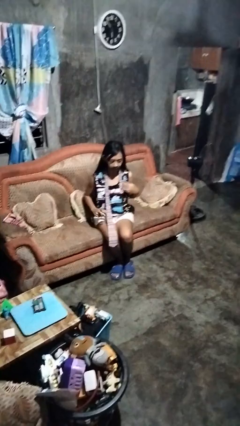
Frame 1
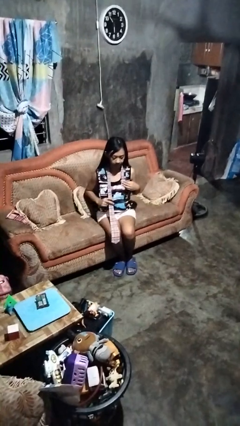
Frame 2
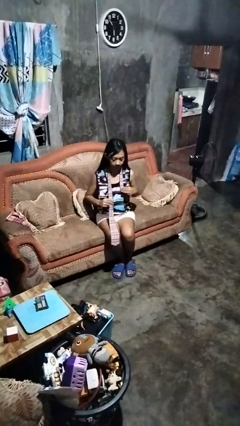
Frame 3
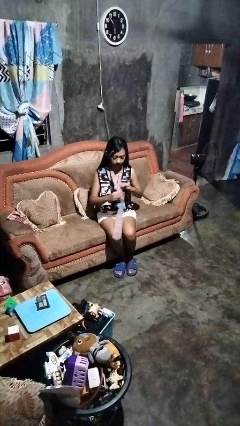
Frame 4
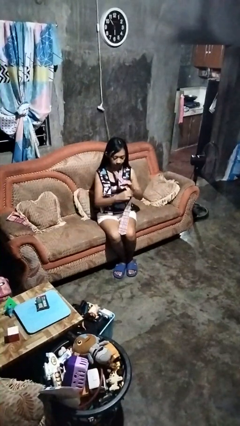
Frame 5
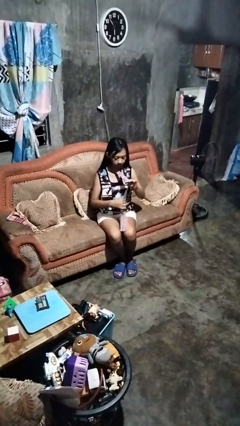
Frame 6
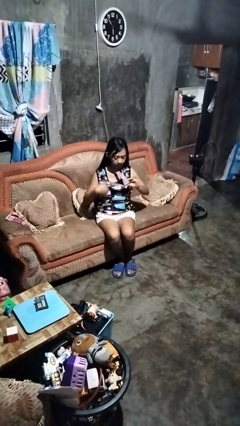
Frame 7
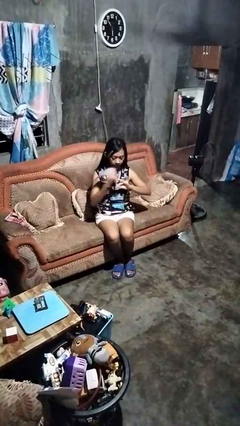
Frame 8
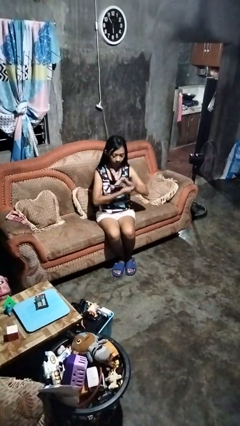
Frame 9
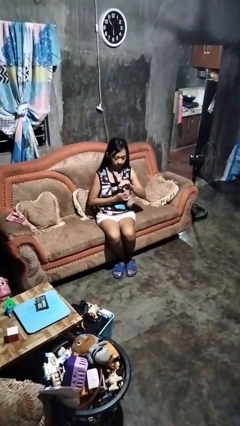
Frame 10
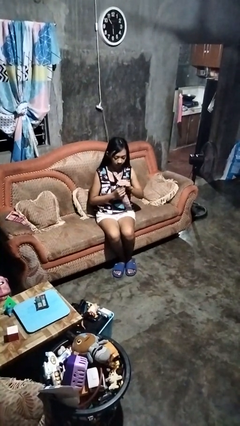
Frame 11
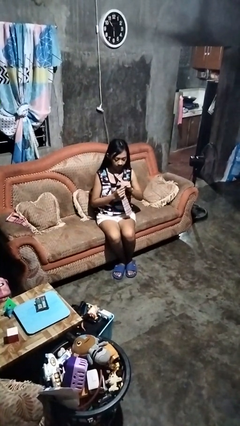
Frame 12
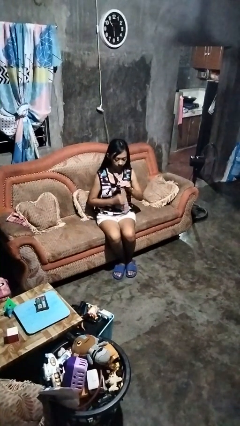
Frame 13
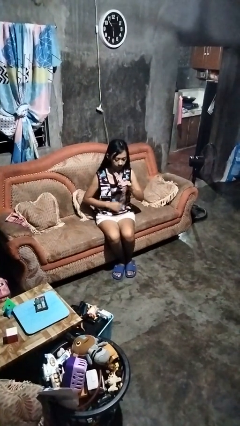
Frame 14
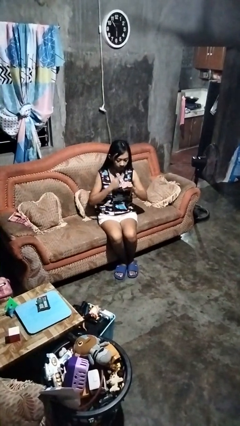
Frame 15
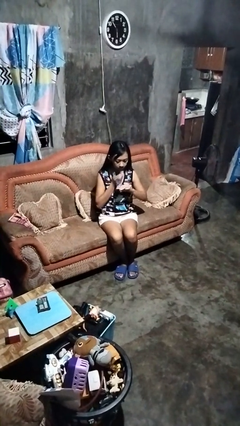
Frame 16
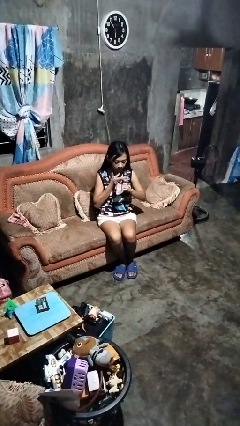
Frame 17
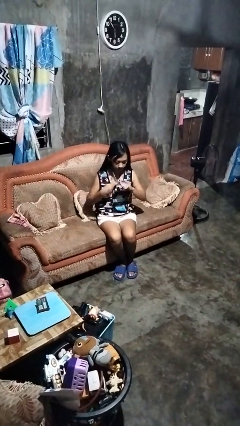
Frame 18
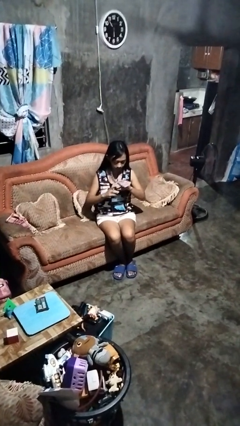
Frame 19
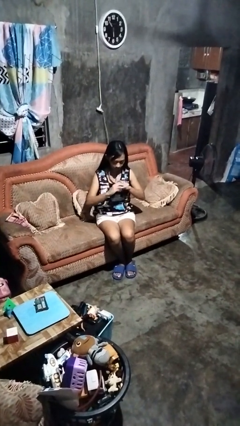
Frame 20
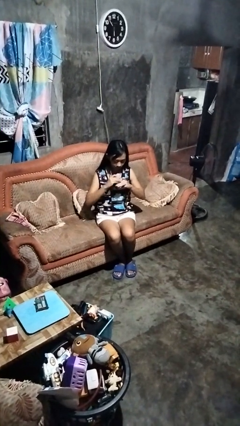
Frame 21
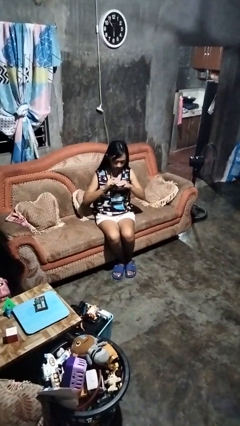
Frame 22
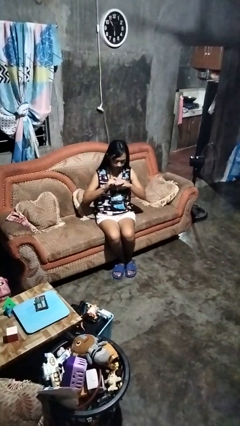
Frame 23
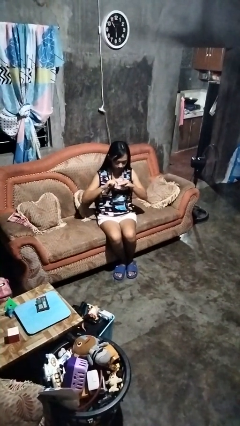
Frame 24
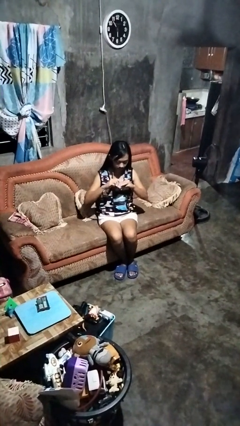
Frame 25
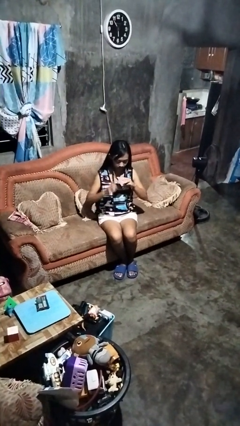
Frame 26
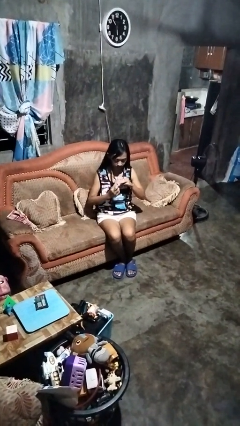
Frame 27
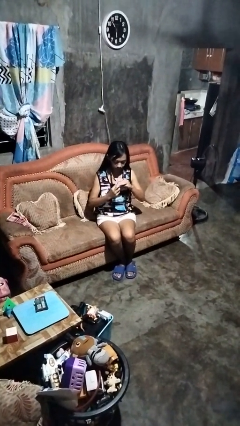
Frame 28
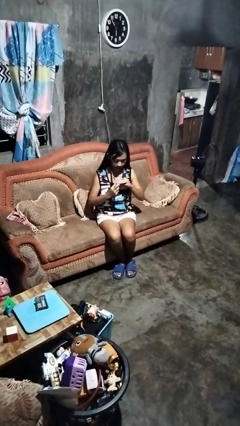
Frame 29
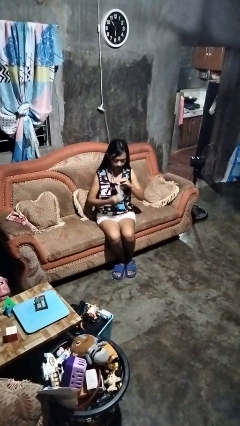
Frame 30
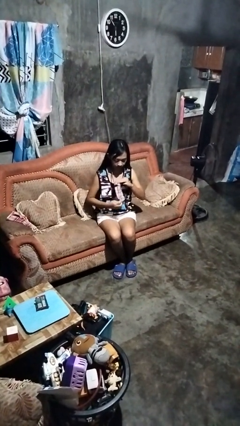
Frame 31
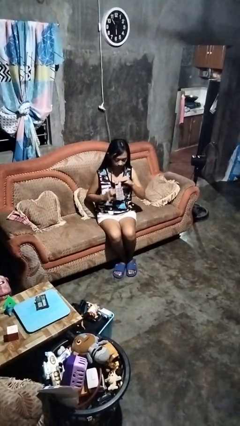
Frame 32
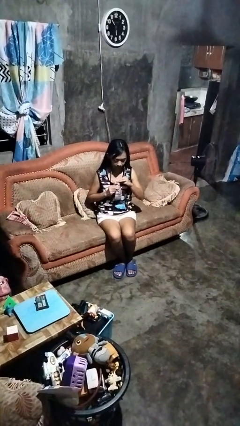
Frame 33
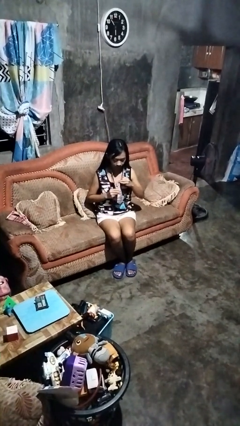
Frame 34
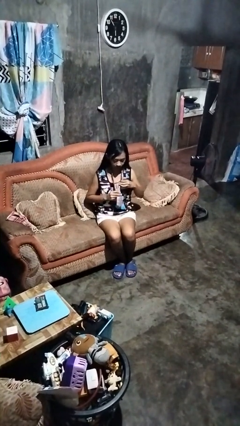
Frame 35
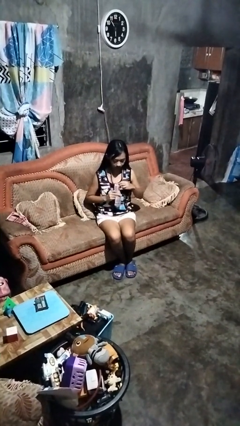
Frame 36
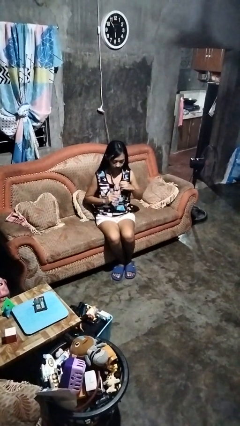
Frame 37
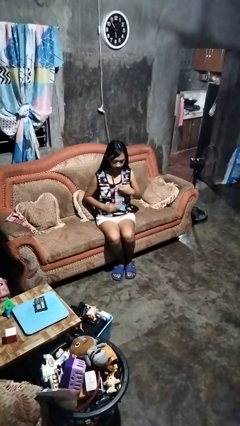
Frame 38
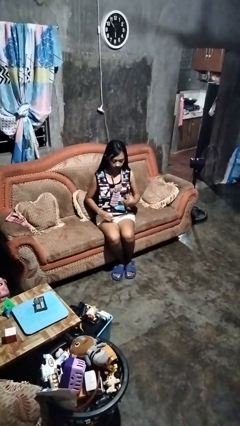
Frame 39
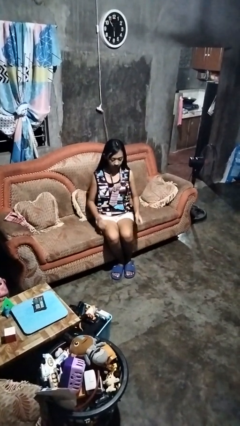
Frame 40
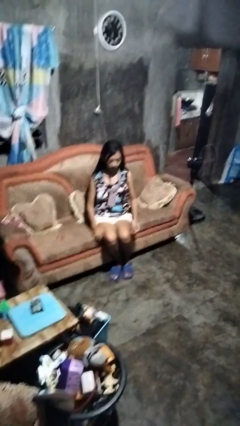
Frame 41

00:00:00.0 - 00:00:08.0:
person puts on necktie

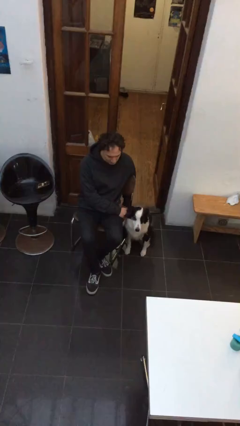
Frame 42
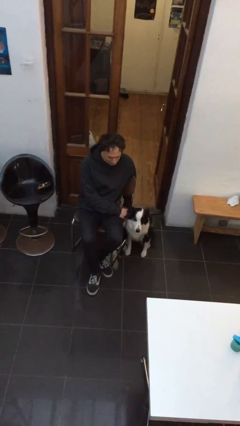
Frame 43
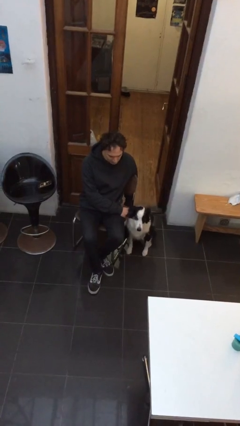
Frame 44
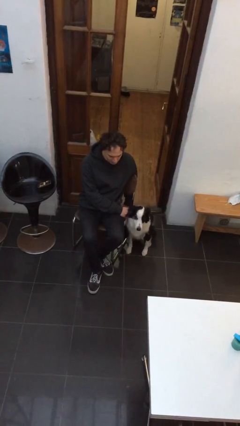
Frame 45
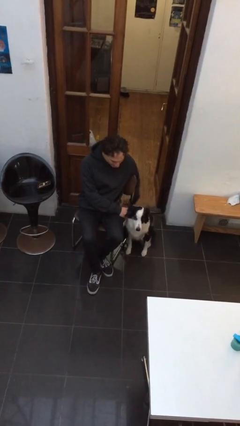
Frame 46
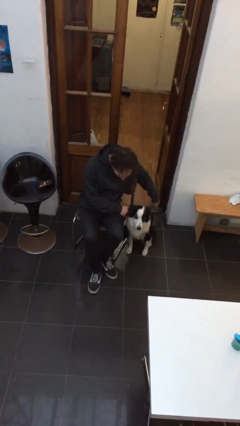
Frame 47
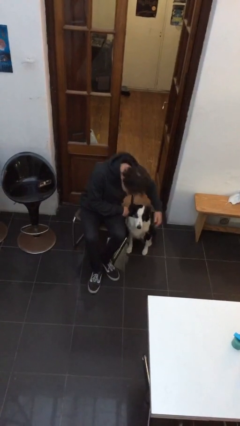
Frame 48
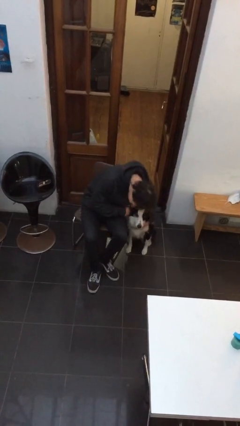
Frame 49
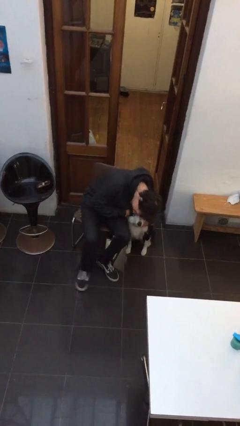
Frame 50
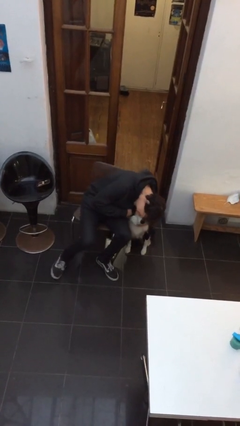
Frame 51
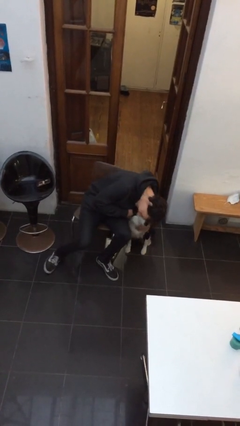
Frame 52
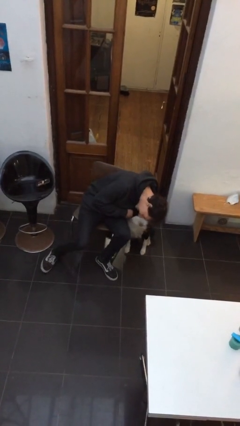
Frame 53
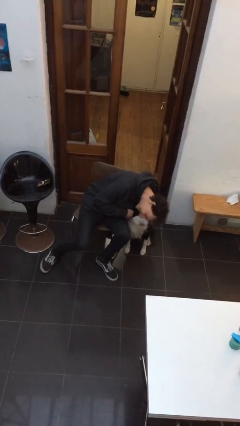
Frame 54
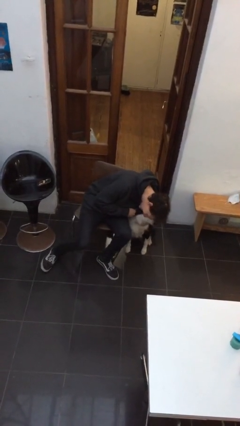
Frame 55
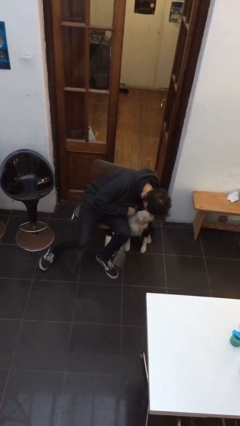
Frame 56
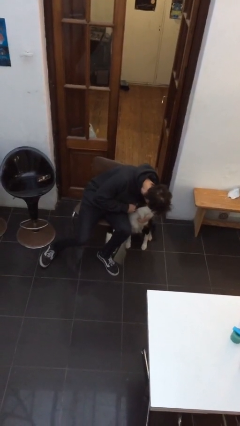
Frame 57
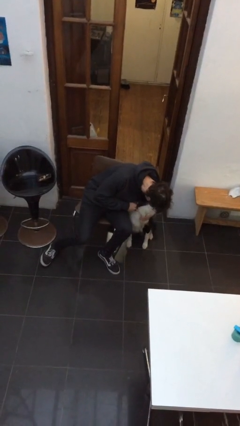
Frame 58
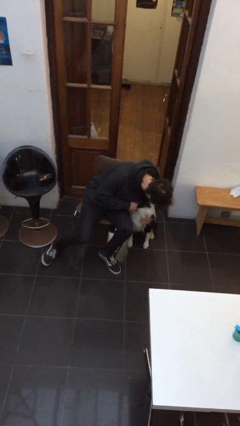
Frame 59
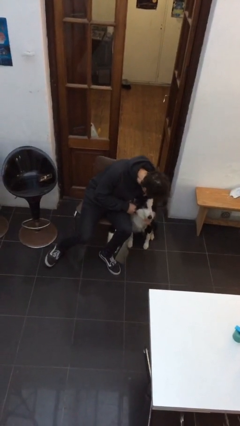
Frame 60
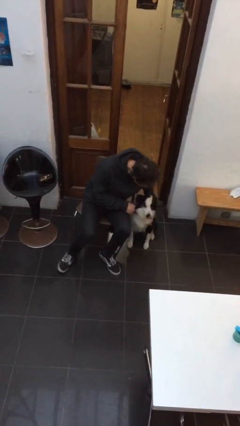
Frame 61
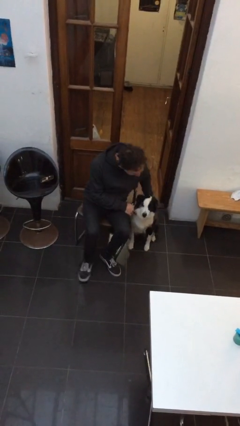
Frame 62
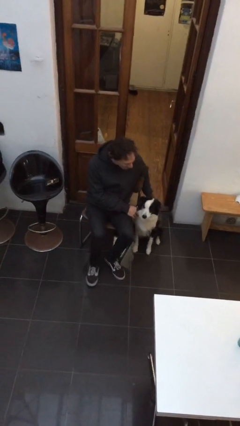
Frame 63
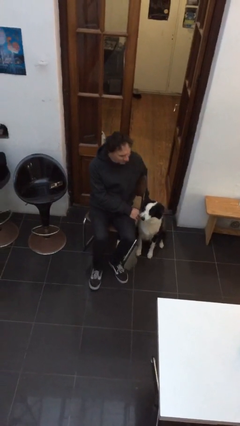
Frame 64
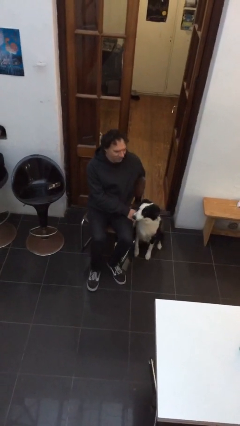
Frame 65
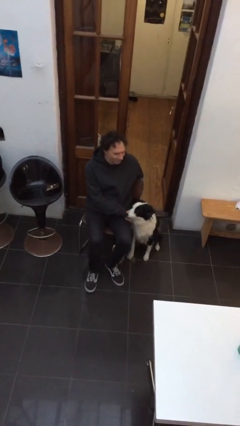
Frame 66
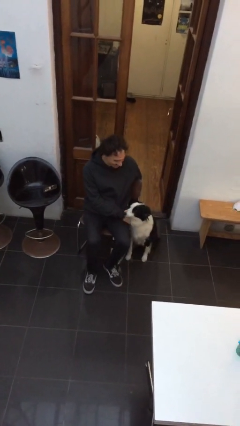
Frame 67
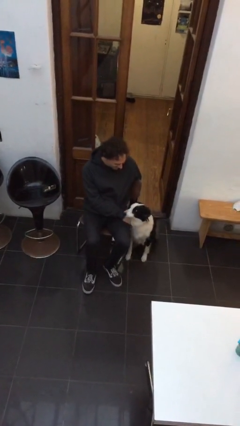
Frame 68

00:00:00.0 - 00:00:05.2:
person hugs dog

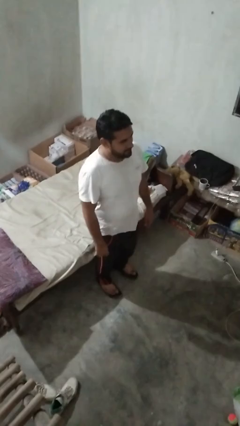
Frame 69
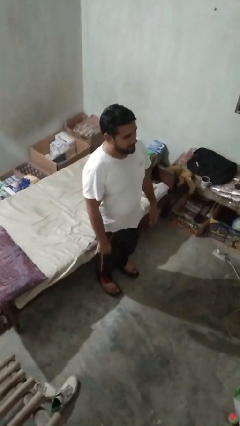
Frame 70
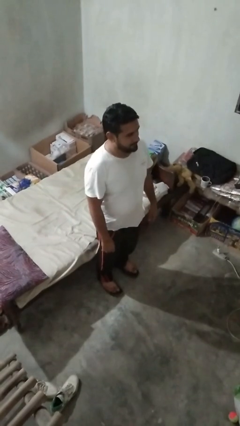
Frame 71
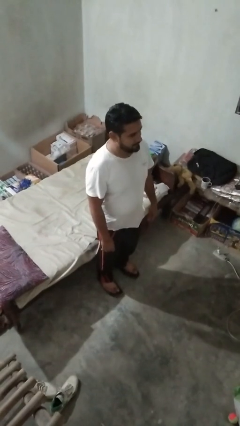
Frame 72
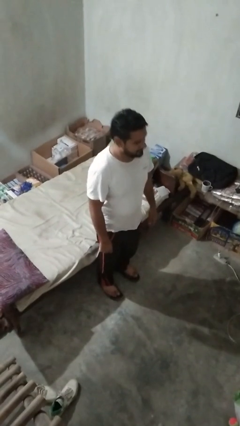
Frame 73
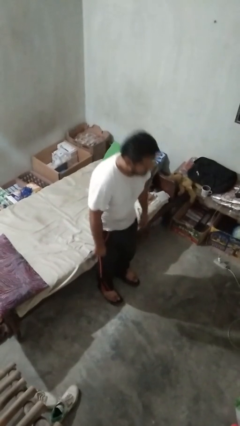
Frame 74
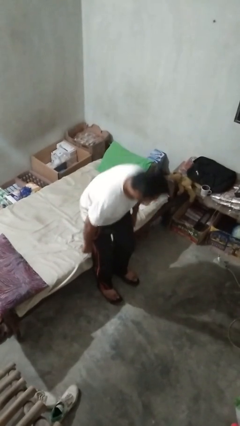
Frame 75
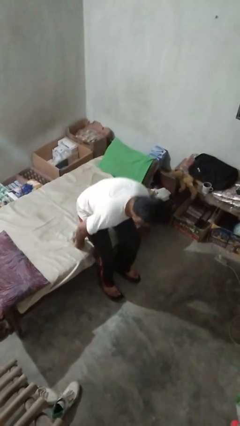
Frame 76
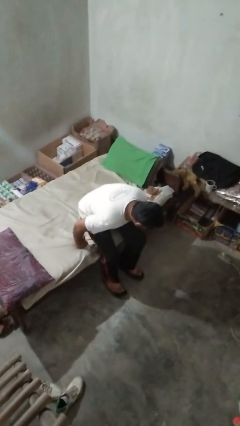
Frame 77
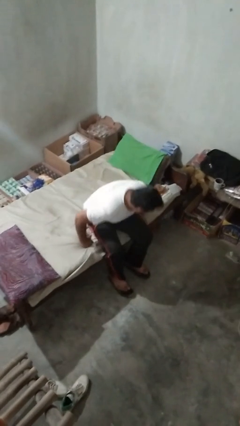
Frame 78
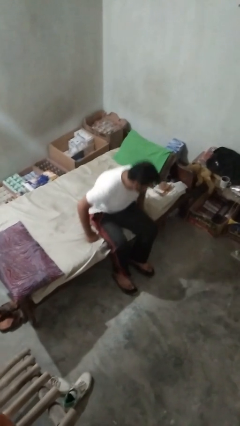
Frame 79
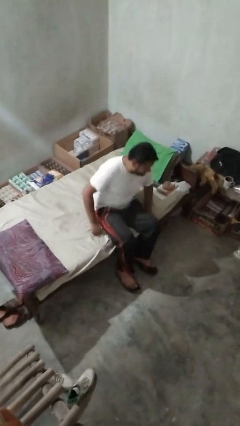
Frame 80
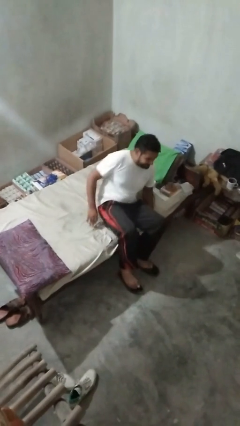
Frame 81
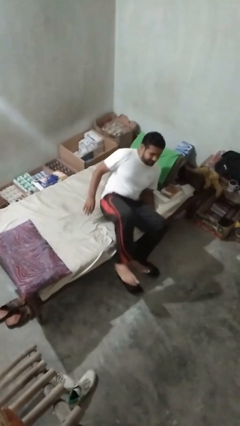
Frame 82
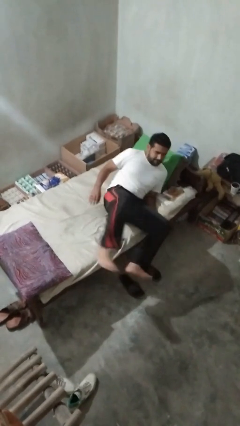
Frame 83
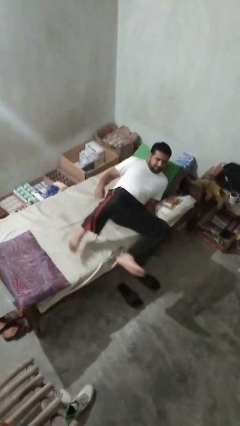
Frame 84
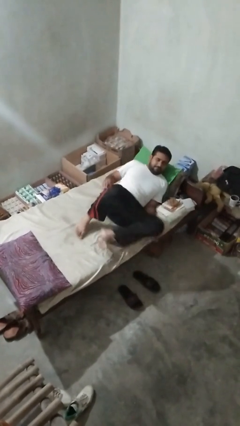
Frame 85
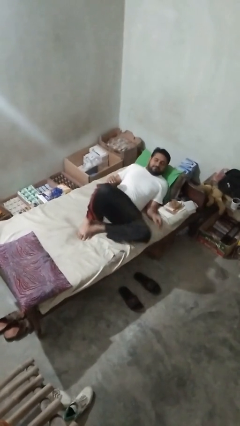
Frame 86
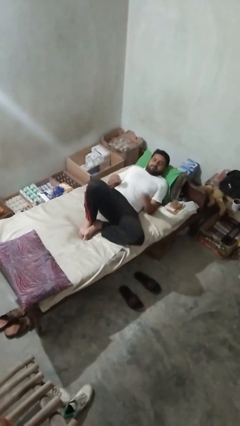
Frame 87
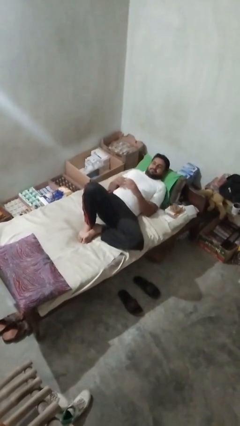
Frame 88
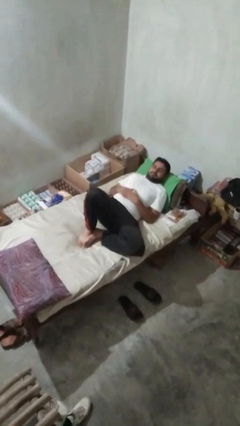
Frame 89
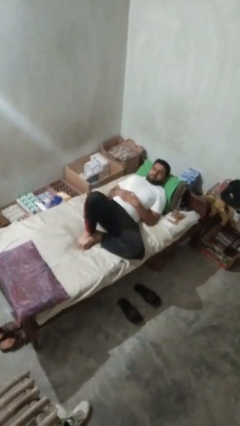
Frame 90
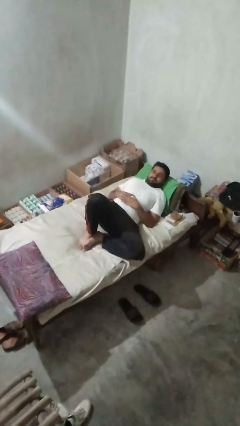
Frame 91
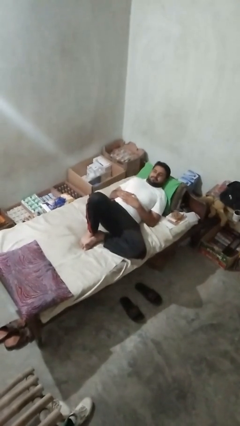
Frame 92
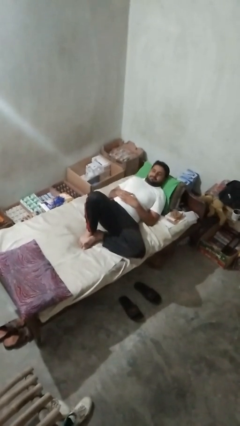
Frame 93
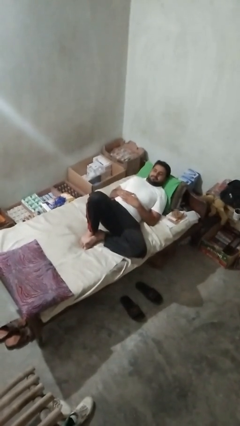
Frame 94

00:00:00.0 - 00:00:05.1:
person lies down on bed
